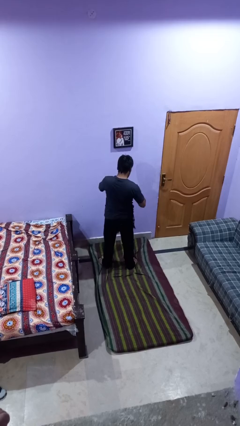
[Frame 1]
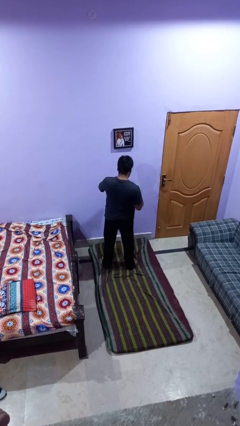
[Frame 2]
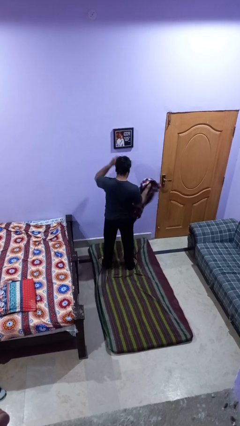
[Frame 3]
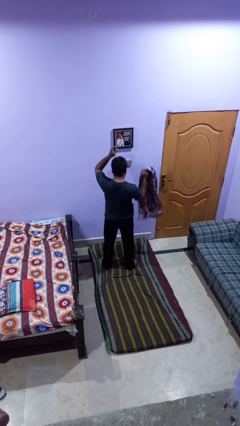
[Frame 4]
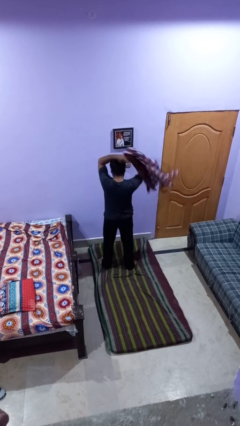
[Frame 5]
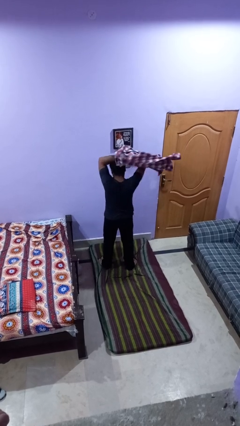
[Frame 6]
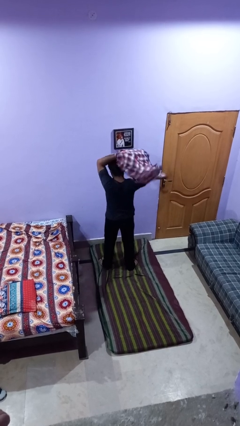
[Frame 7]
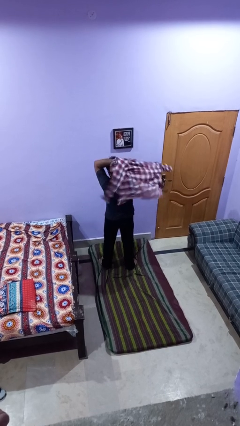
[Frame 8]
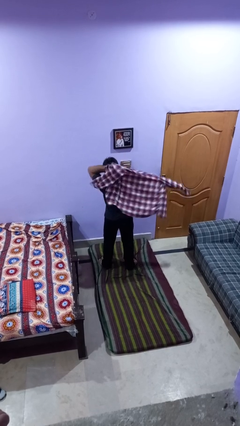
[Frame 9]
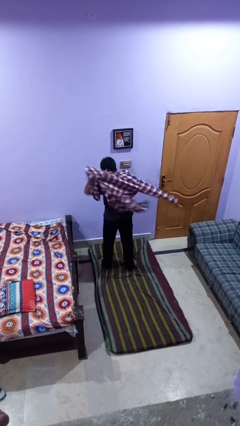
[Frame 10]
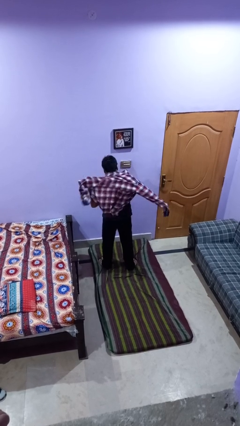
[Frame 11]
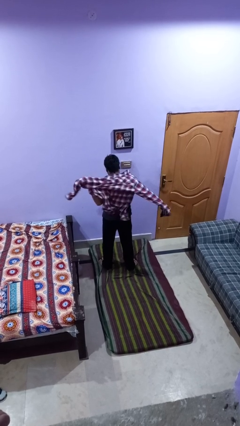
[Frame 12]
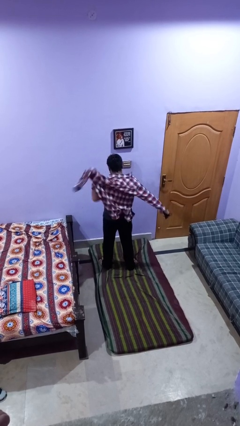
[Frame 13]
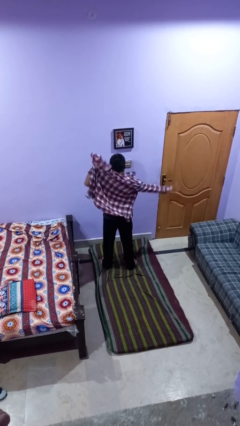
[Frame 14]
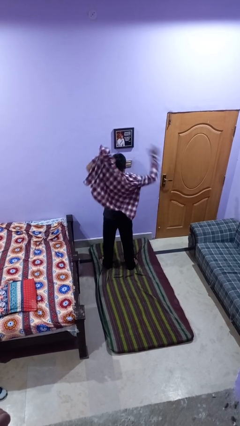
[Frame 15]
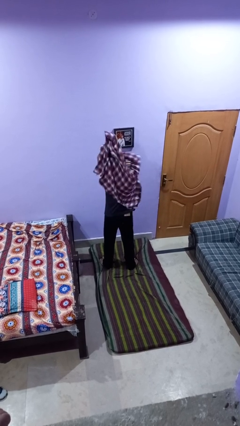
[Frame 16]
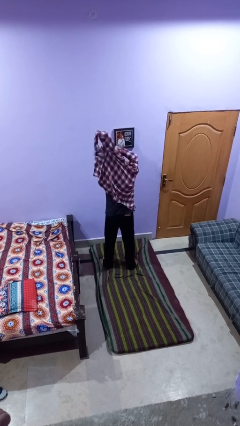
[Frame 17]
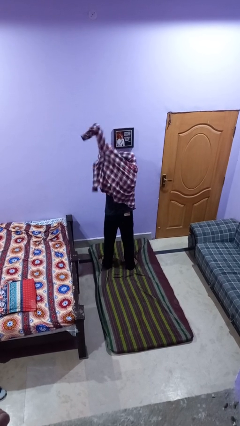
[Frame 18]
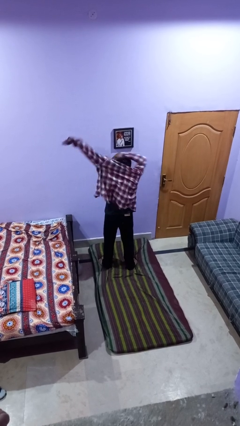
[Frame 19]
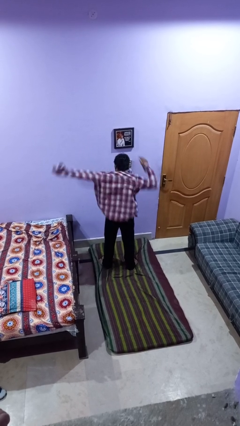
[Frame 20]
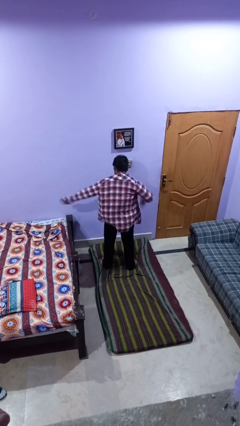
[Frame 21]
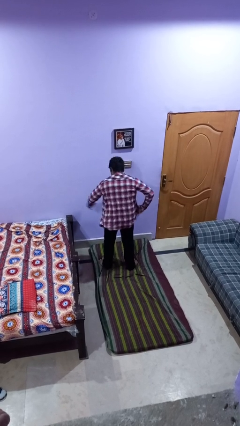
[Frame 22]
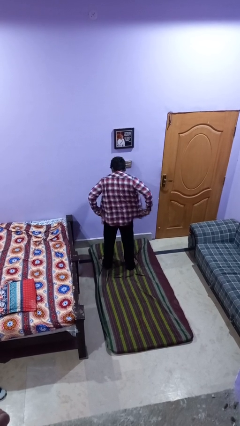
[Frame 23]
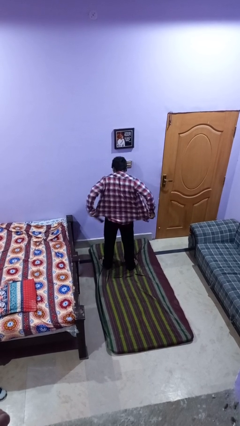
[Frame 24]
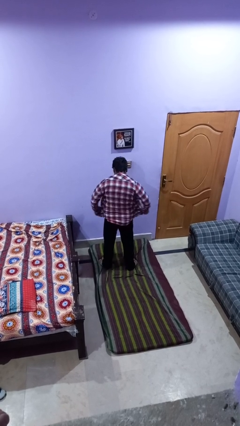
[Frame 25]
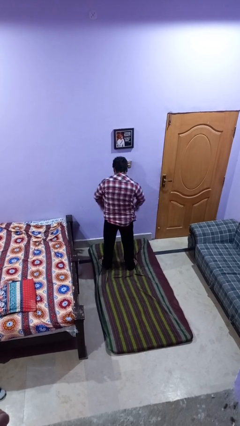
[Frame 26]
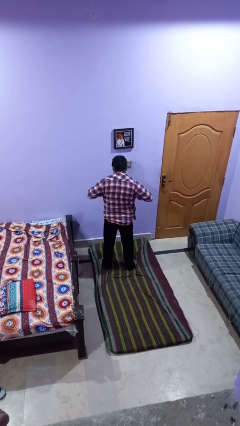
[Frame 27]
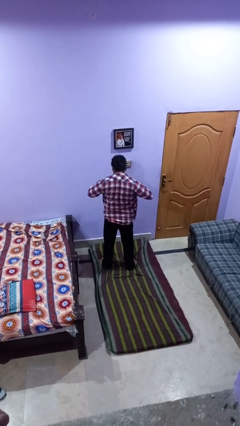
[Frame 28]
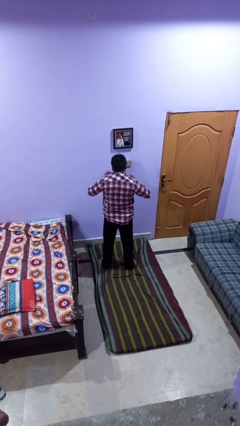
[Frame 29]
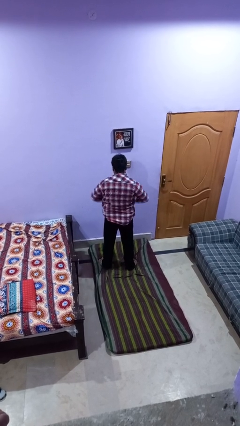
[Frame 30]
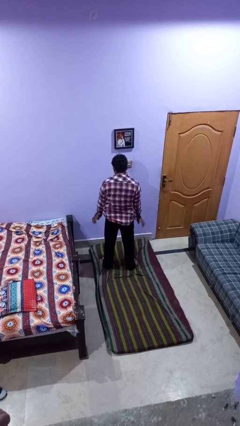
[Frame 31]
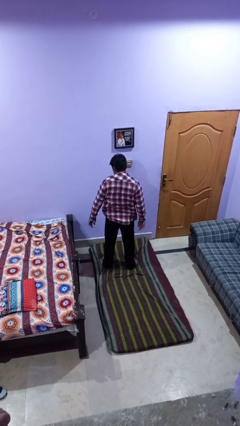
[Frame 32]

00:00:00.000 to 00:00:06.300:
person puts on shirt

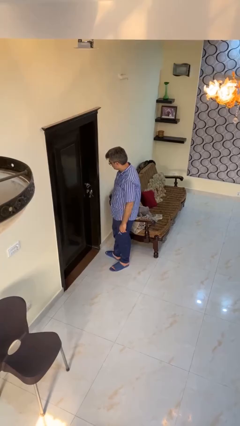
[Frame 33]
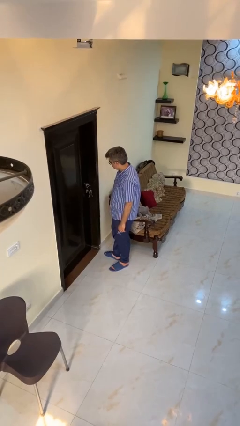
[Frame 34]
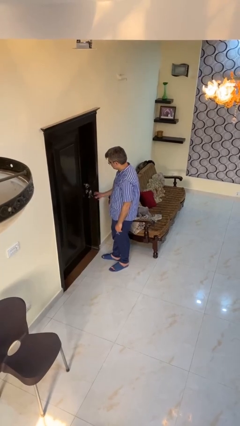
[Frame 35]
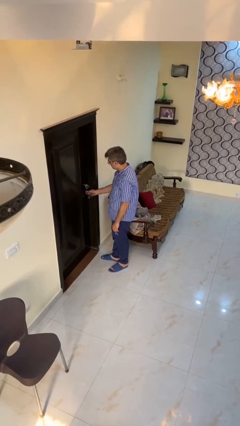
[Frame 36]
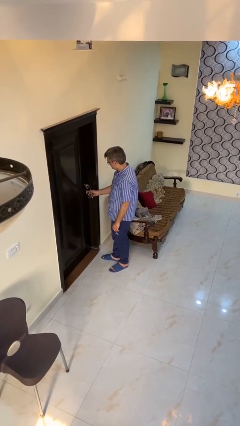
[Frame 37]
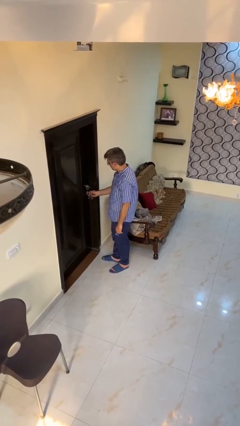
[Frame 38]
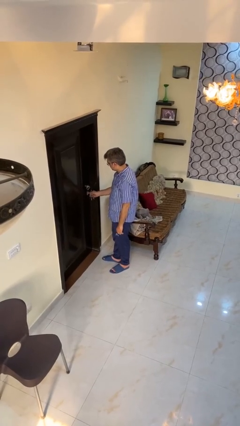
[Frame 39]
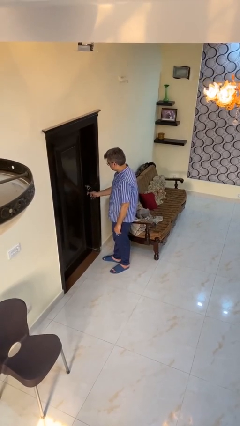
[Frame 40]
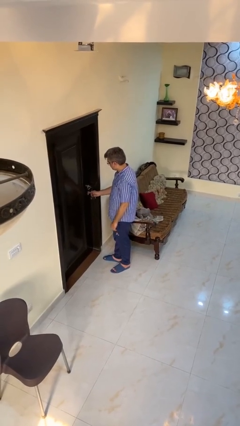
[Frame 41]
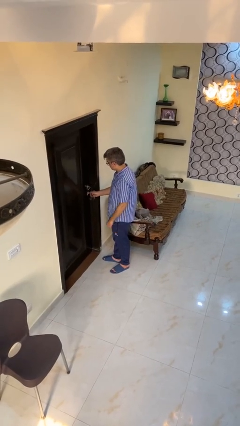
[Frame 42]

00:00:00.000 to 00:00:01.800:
person unlocks door with keys

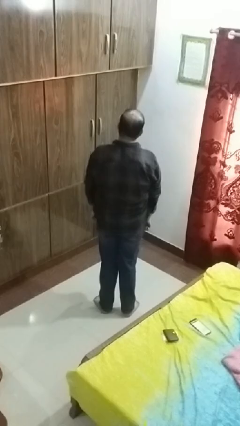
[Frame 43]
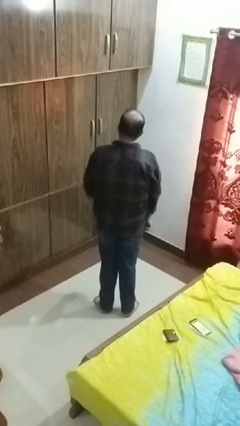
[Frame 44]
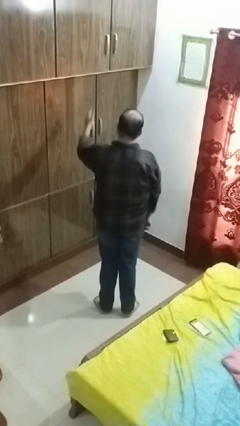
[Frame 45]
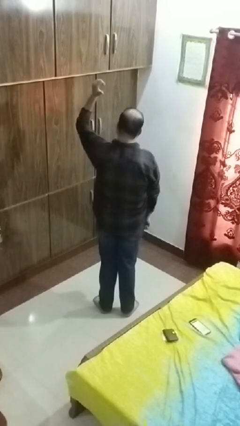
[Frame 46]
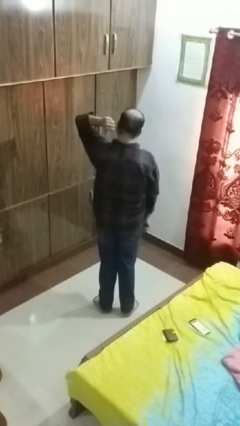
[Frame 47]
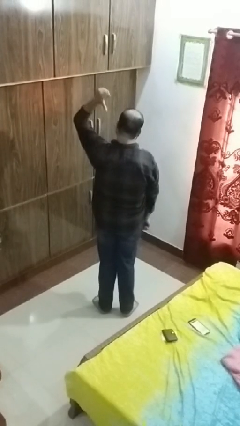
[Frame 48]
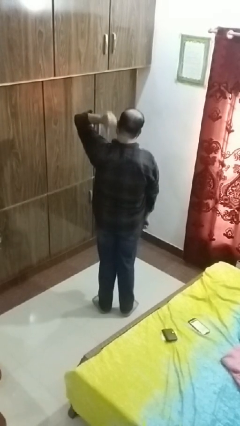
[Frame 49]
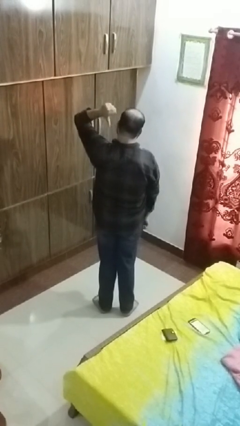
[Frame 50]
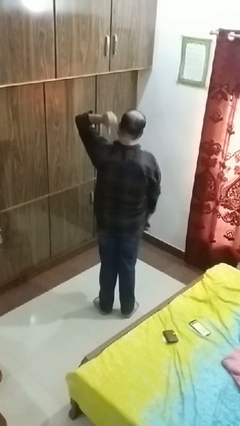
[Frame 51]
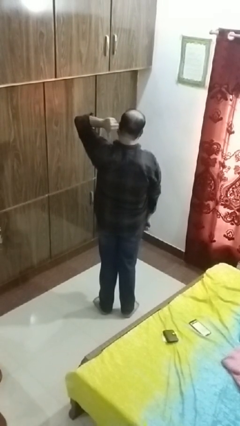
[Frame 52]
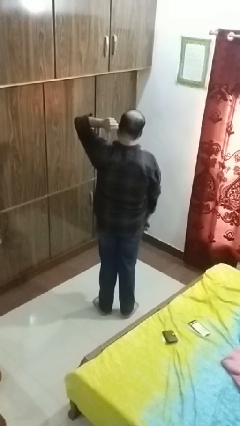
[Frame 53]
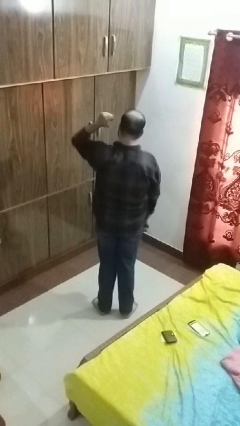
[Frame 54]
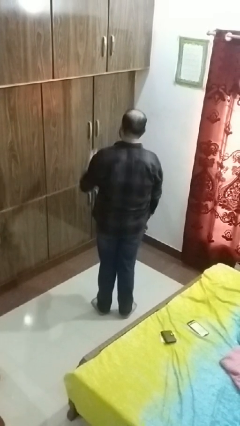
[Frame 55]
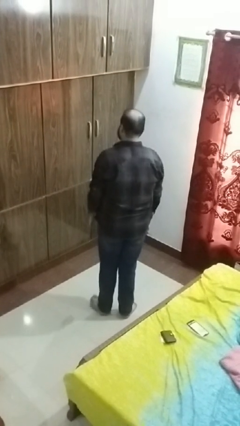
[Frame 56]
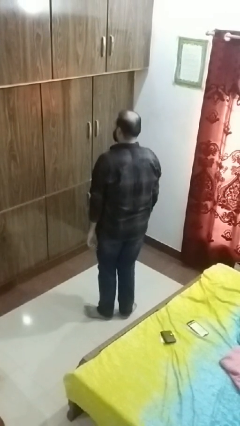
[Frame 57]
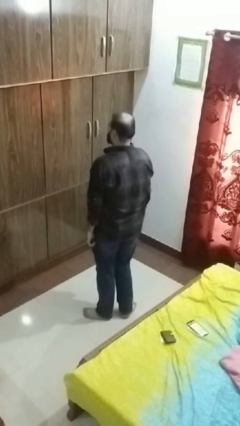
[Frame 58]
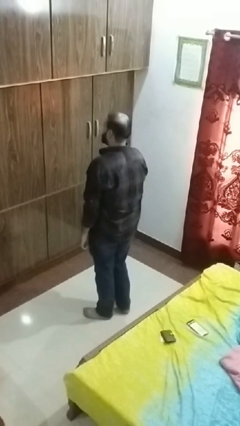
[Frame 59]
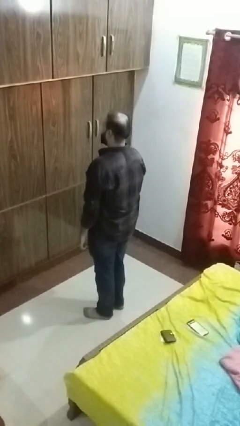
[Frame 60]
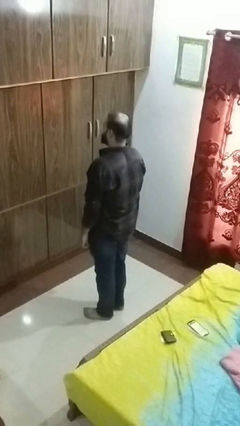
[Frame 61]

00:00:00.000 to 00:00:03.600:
person gestures behind me

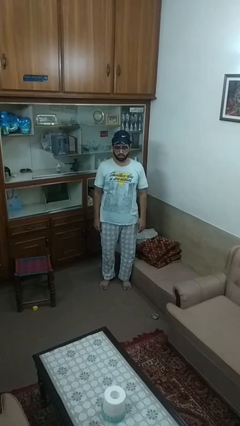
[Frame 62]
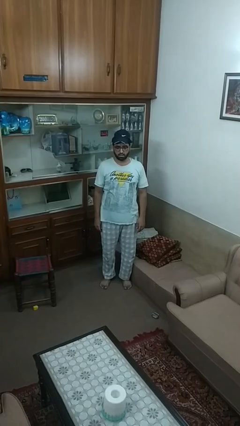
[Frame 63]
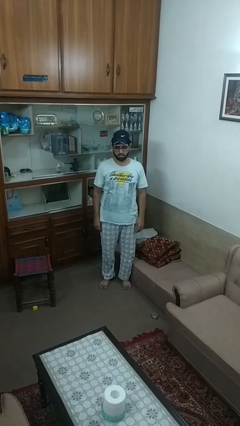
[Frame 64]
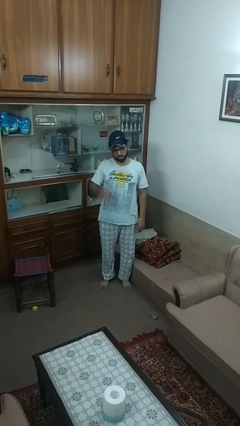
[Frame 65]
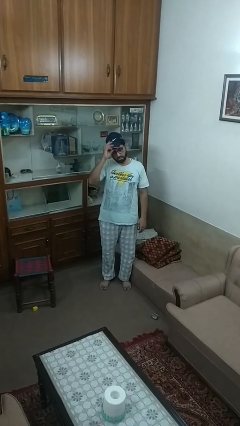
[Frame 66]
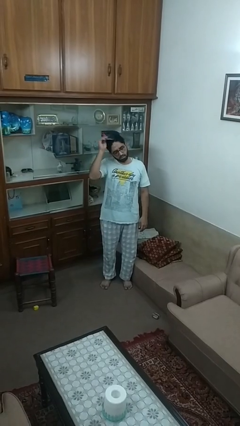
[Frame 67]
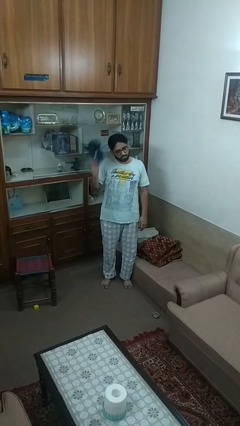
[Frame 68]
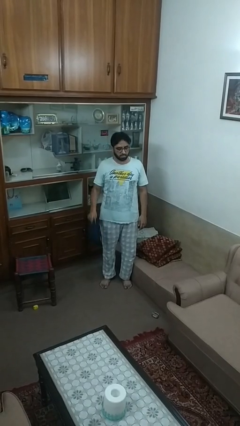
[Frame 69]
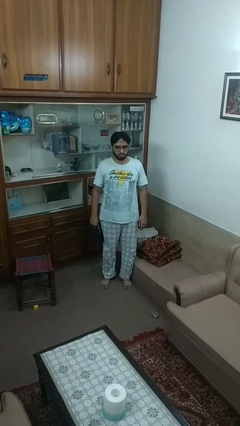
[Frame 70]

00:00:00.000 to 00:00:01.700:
person takes off hat

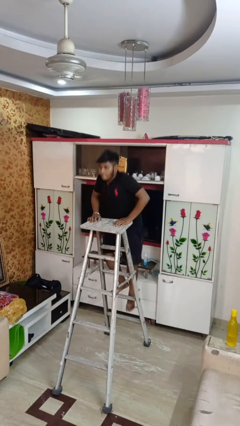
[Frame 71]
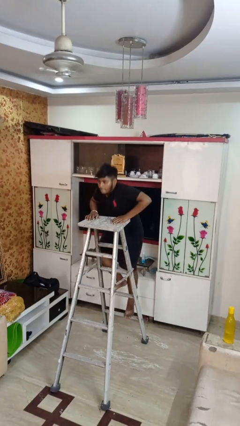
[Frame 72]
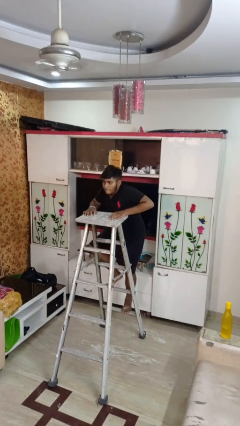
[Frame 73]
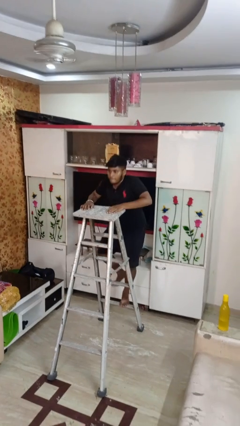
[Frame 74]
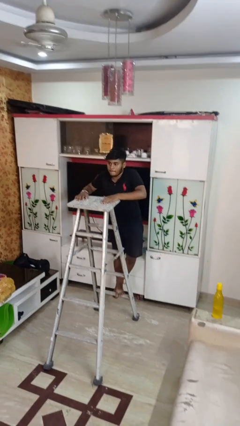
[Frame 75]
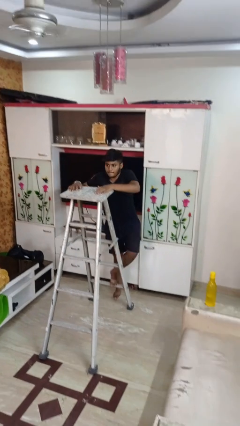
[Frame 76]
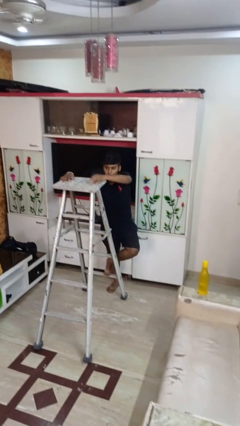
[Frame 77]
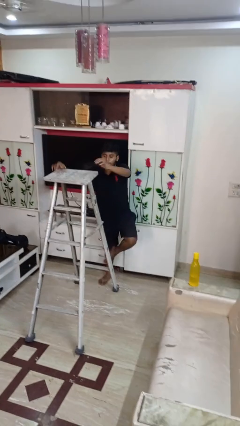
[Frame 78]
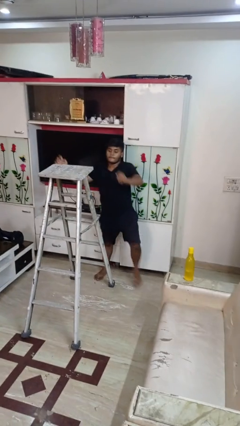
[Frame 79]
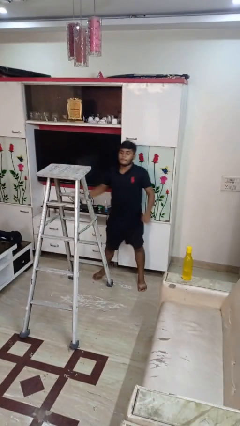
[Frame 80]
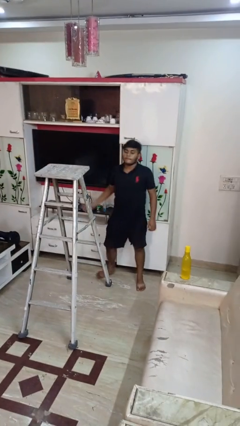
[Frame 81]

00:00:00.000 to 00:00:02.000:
person climbs down ladder

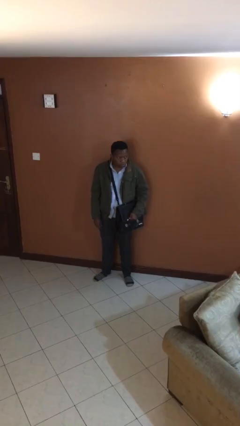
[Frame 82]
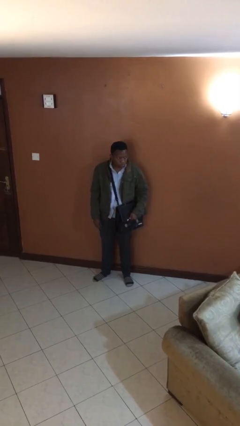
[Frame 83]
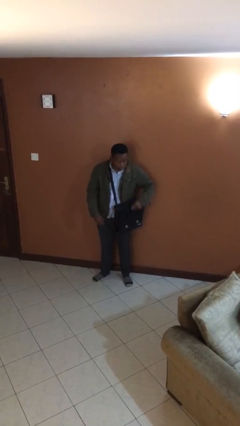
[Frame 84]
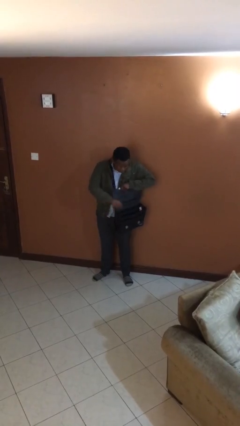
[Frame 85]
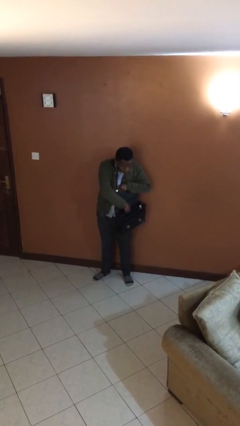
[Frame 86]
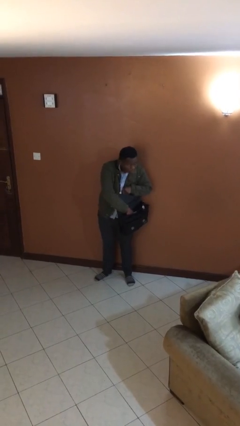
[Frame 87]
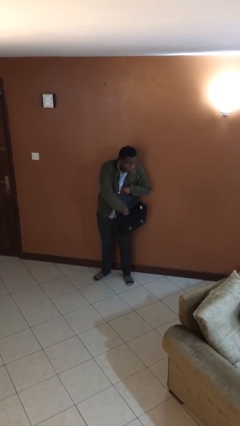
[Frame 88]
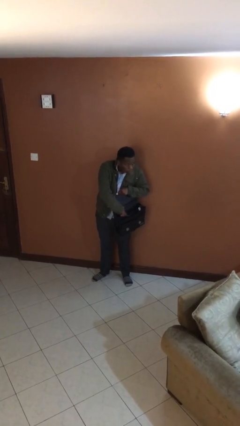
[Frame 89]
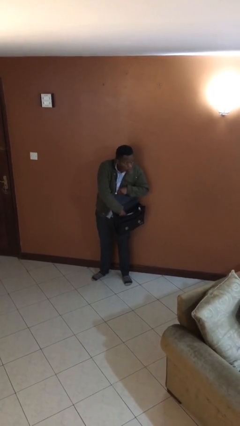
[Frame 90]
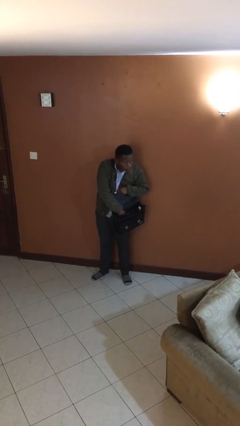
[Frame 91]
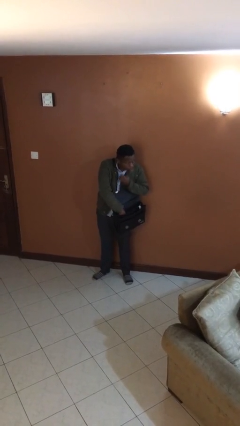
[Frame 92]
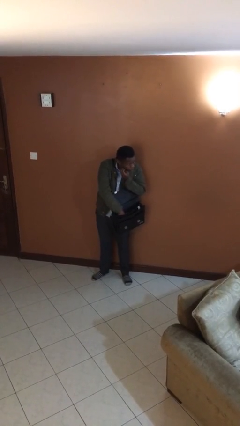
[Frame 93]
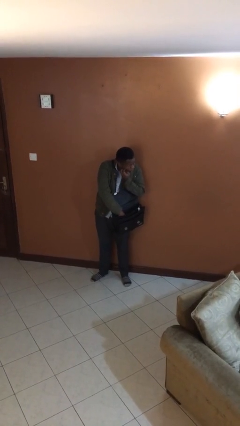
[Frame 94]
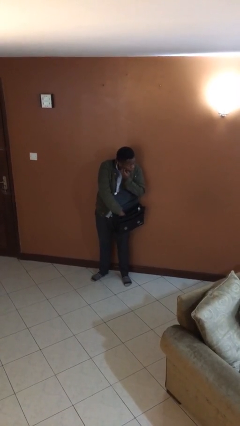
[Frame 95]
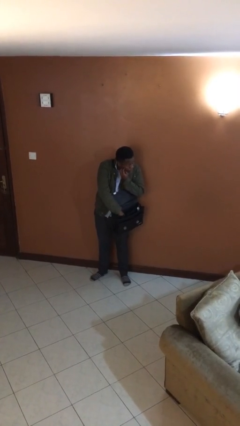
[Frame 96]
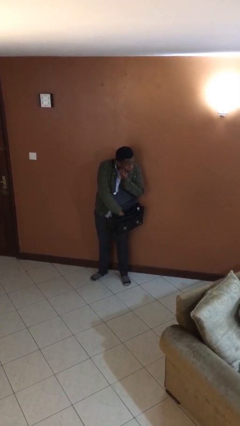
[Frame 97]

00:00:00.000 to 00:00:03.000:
person searches in purse
